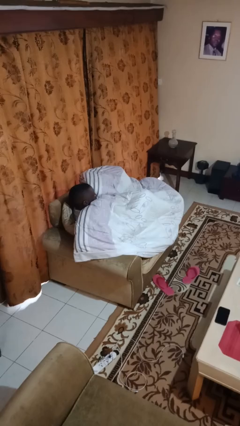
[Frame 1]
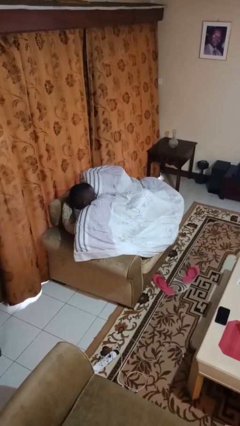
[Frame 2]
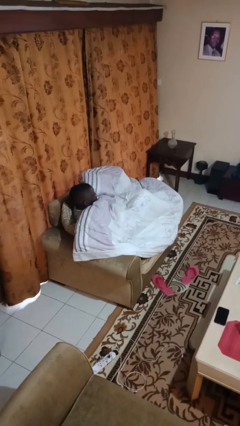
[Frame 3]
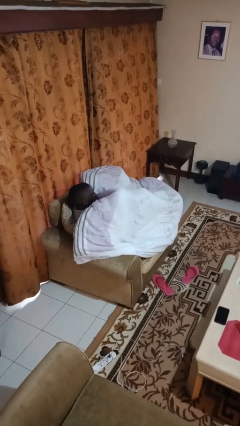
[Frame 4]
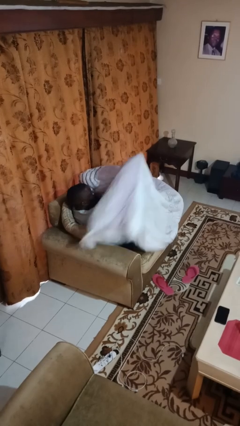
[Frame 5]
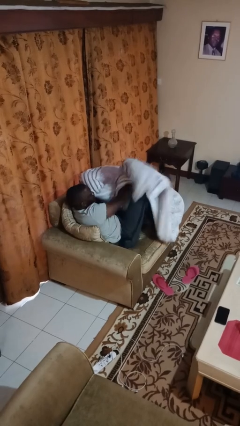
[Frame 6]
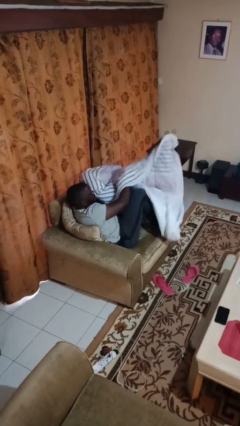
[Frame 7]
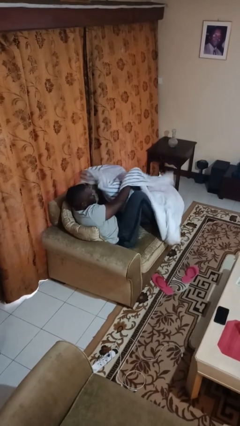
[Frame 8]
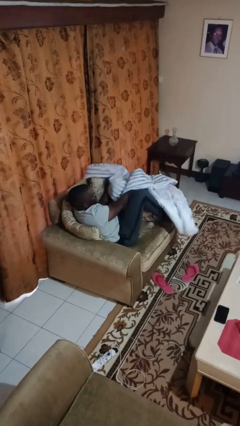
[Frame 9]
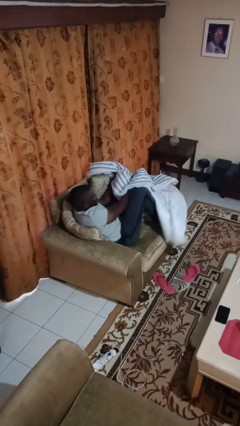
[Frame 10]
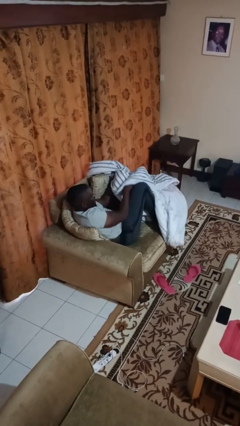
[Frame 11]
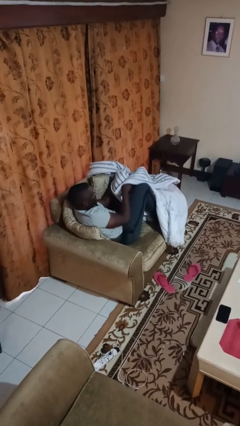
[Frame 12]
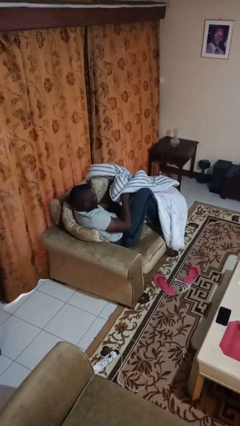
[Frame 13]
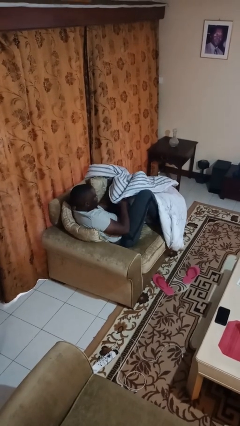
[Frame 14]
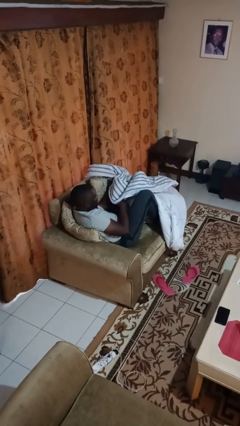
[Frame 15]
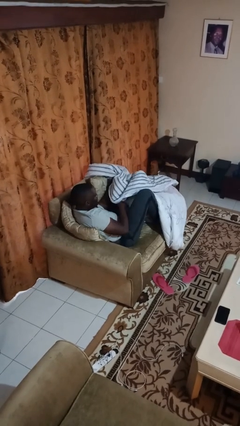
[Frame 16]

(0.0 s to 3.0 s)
person uncovers with blanket

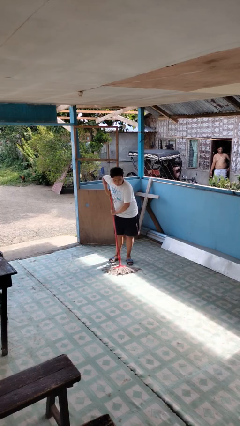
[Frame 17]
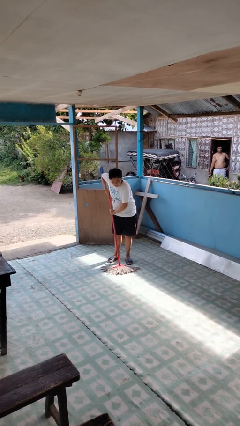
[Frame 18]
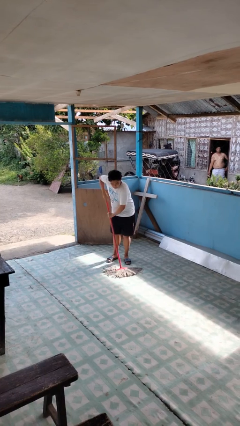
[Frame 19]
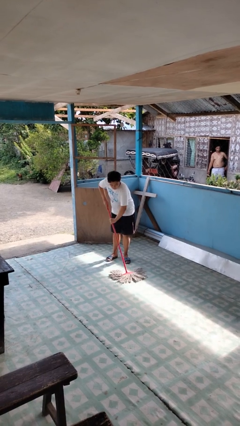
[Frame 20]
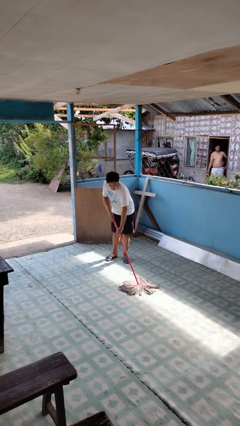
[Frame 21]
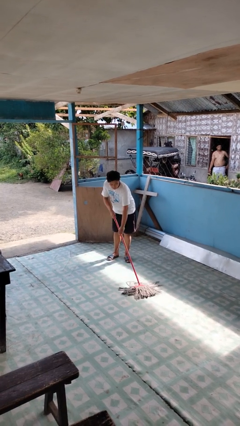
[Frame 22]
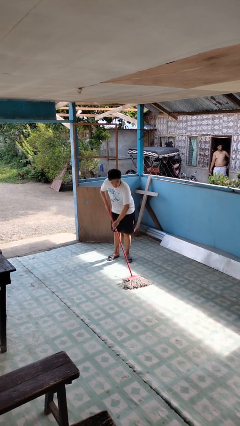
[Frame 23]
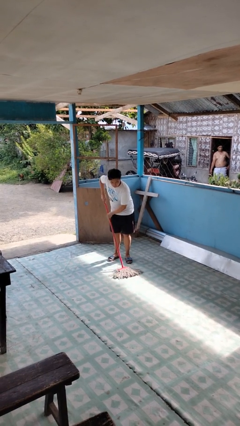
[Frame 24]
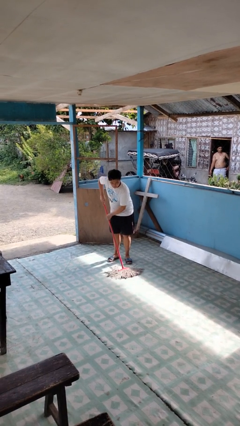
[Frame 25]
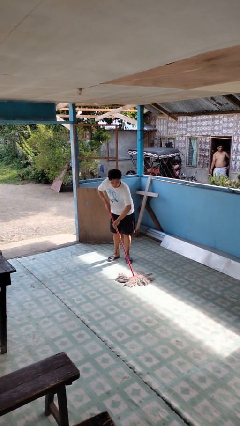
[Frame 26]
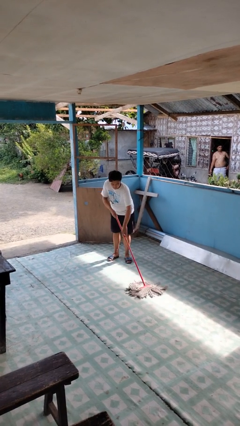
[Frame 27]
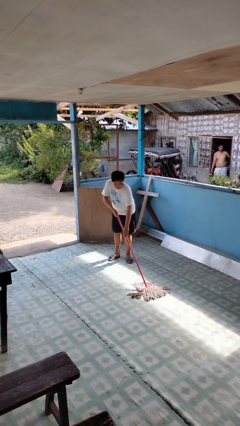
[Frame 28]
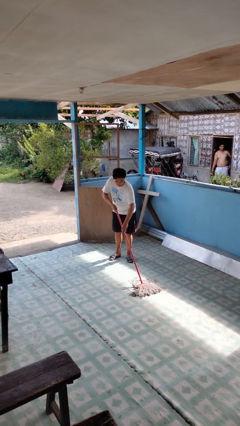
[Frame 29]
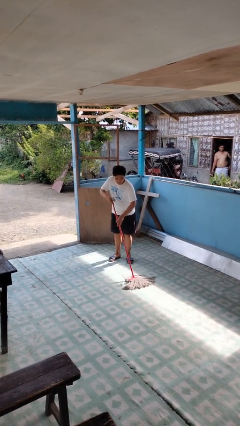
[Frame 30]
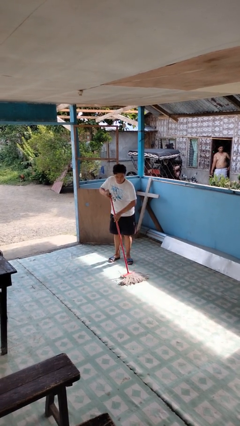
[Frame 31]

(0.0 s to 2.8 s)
person mops

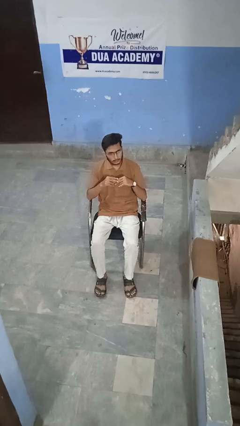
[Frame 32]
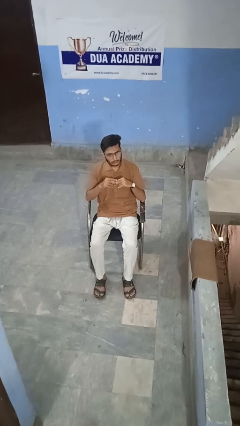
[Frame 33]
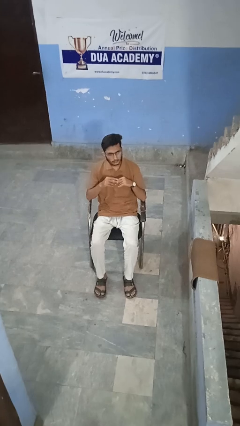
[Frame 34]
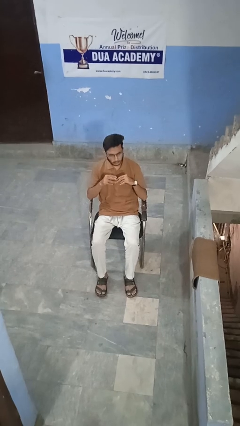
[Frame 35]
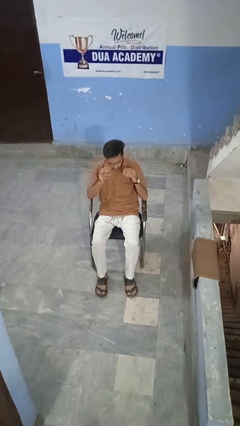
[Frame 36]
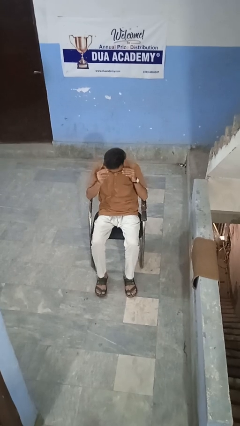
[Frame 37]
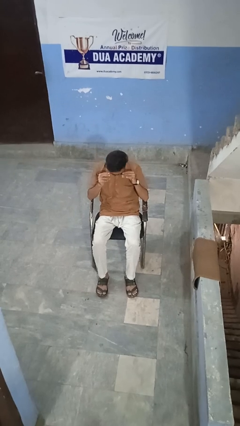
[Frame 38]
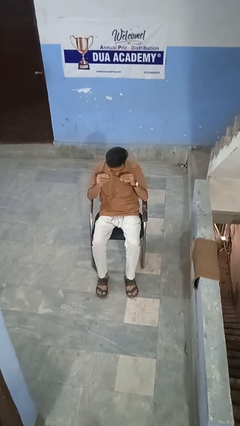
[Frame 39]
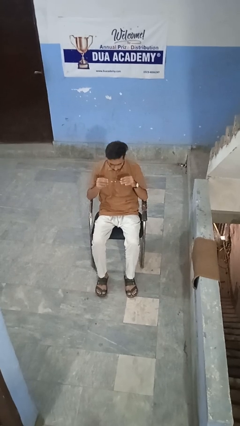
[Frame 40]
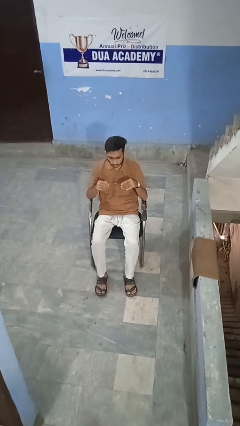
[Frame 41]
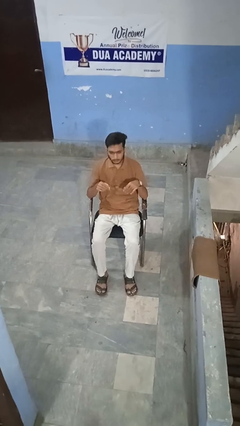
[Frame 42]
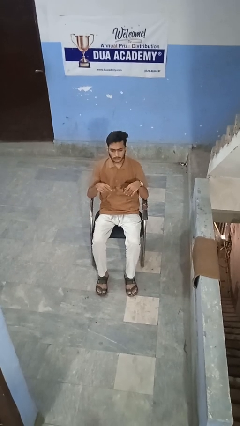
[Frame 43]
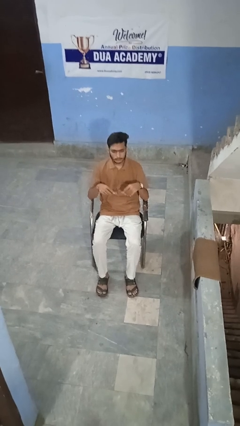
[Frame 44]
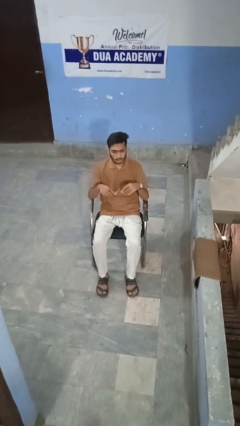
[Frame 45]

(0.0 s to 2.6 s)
person takes off glasses

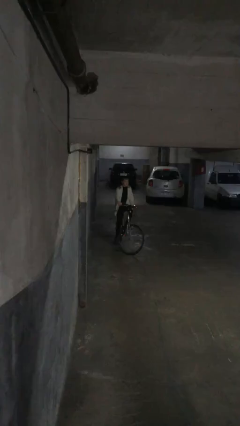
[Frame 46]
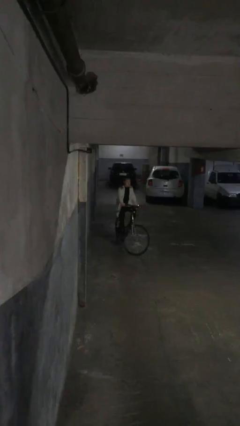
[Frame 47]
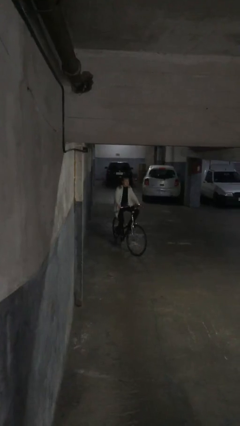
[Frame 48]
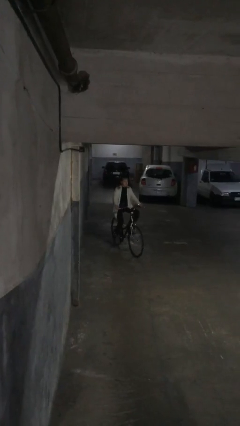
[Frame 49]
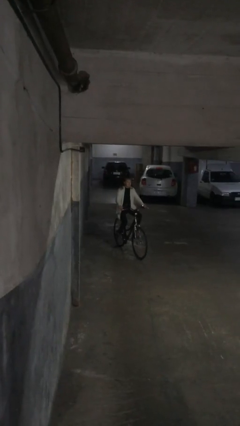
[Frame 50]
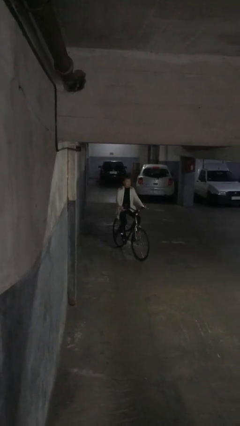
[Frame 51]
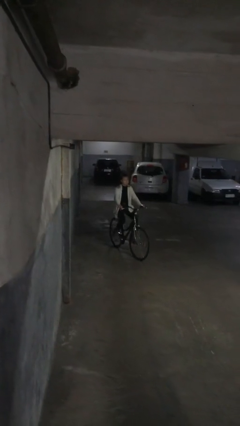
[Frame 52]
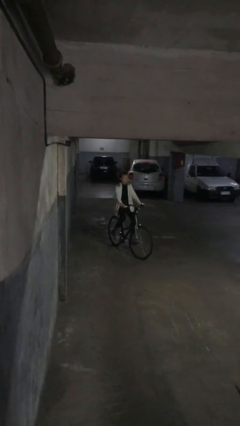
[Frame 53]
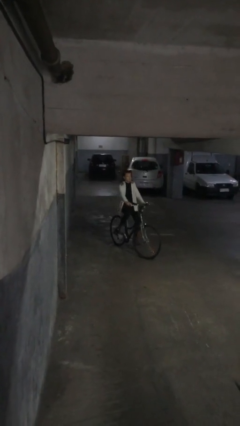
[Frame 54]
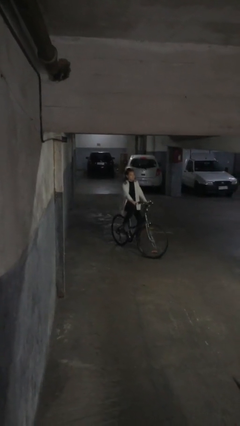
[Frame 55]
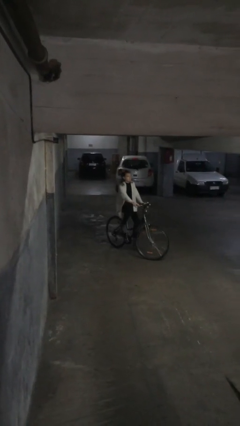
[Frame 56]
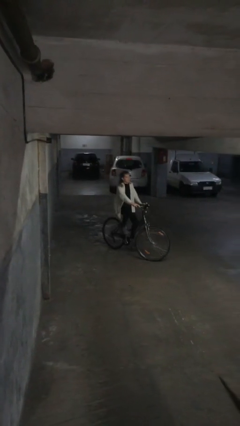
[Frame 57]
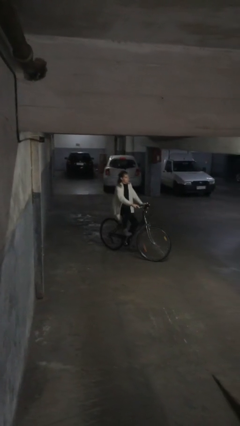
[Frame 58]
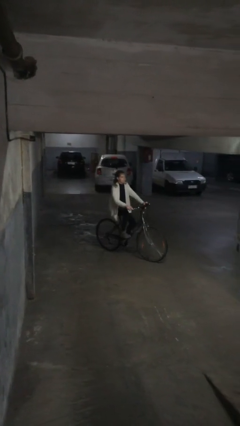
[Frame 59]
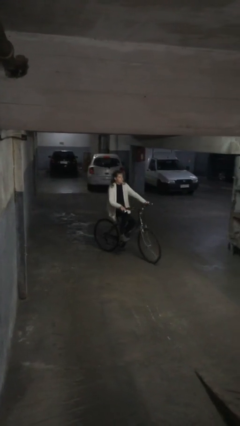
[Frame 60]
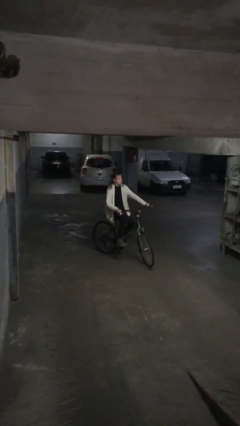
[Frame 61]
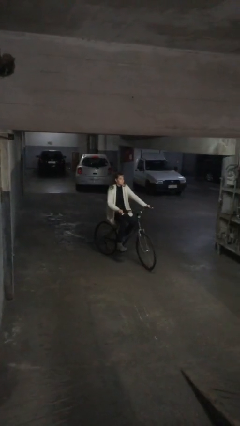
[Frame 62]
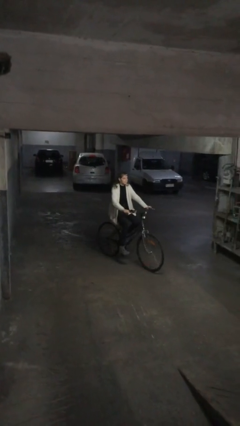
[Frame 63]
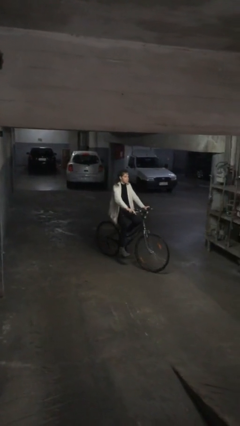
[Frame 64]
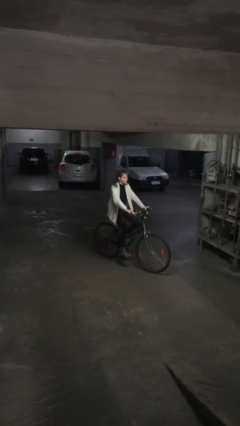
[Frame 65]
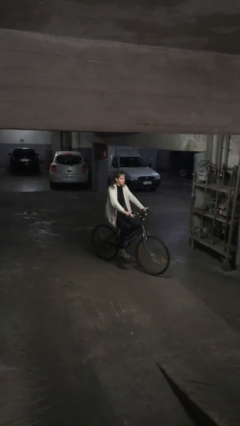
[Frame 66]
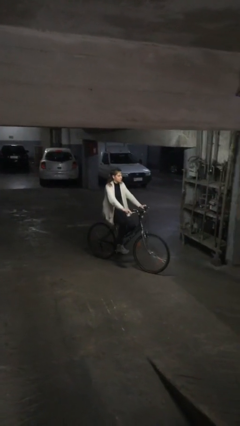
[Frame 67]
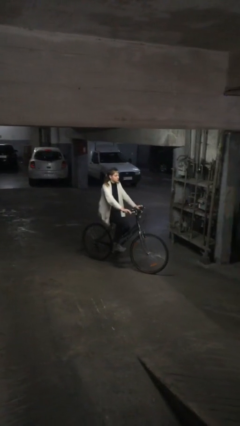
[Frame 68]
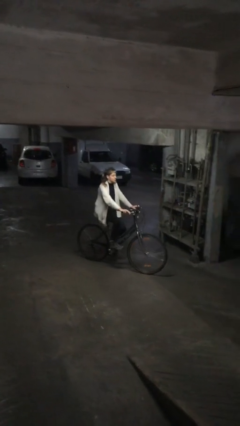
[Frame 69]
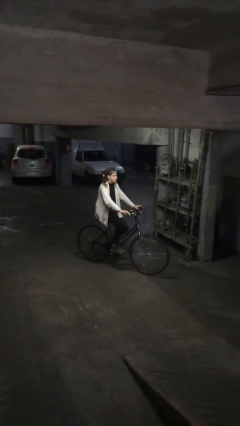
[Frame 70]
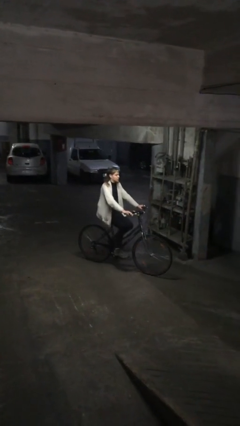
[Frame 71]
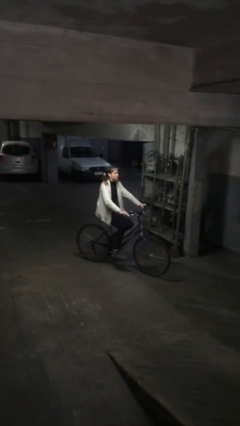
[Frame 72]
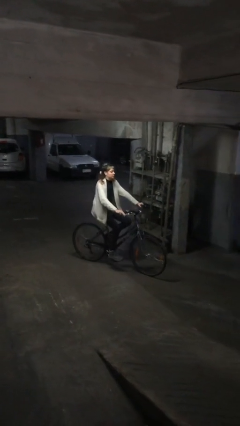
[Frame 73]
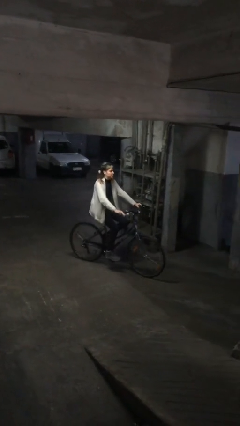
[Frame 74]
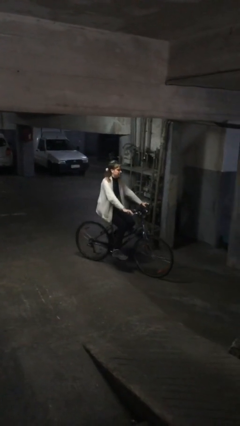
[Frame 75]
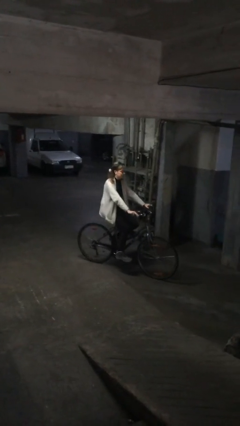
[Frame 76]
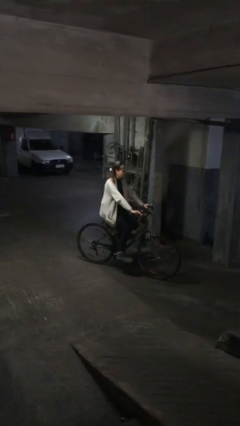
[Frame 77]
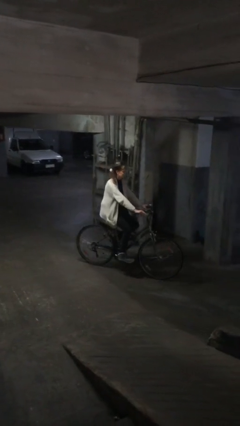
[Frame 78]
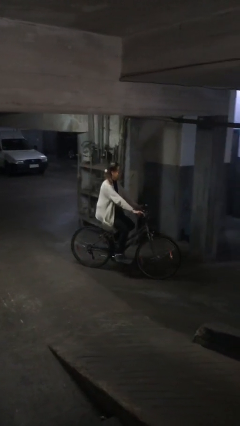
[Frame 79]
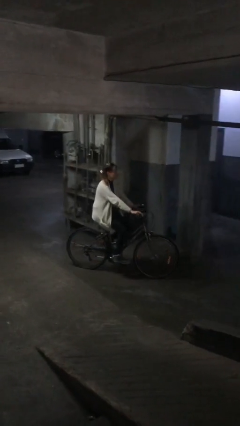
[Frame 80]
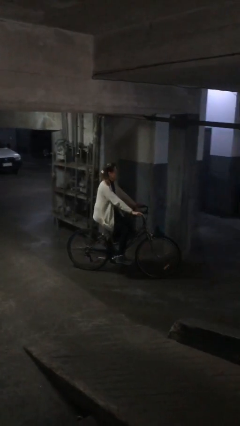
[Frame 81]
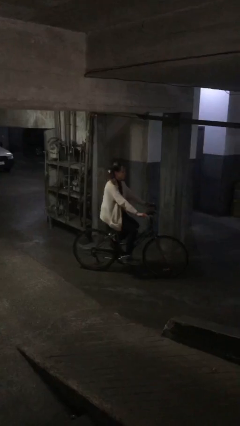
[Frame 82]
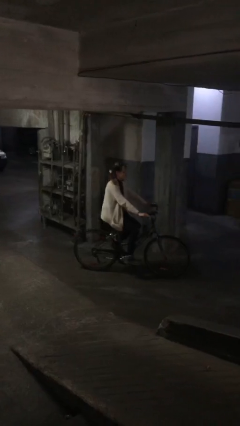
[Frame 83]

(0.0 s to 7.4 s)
person rides bicycle

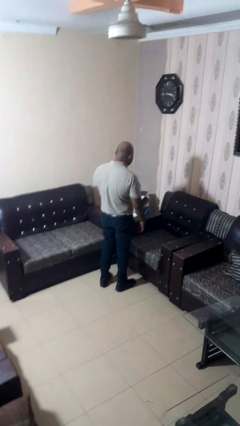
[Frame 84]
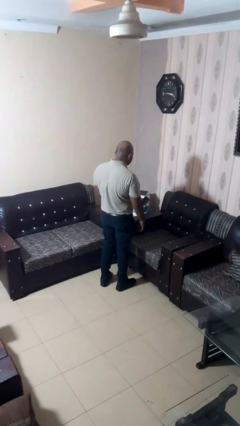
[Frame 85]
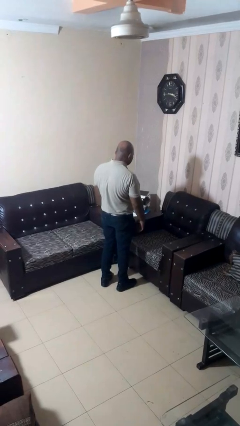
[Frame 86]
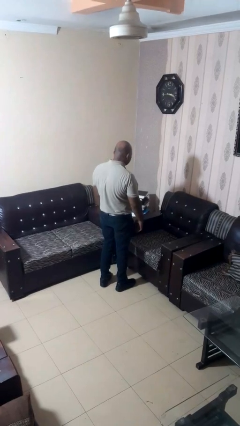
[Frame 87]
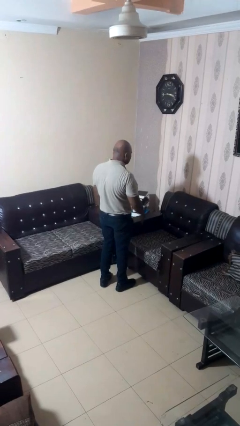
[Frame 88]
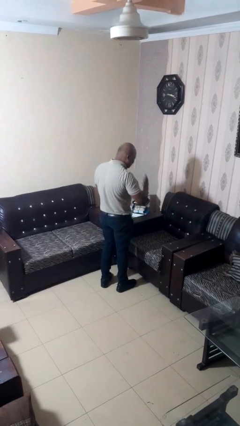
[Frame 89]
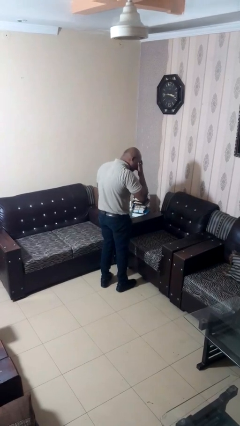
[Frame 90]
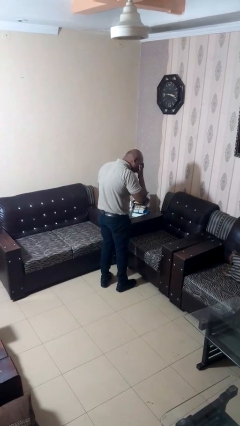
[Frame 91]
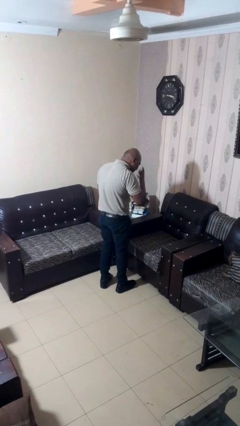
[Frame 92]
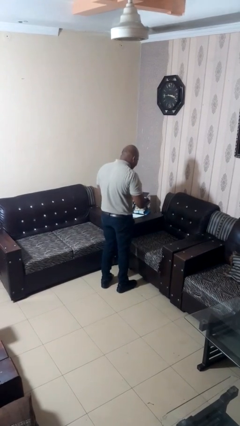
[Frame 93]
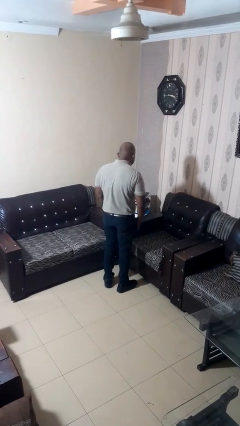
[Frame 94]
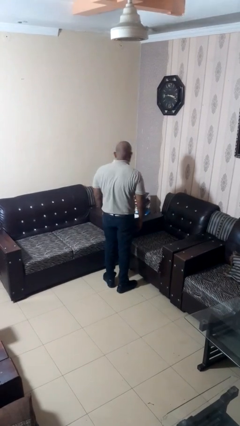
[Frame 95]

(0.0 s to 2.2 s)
person sneezes into hand
